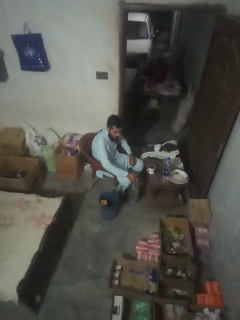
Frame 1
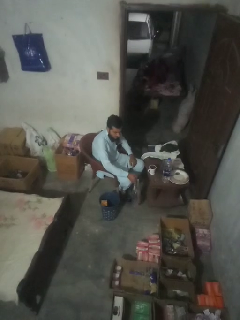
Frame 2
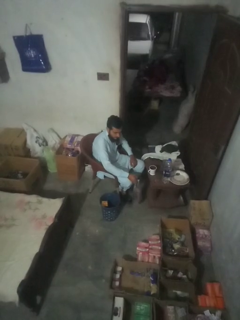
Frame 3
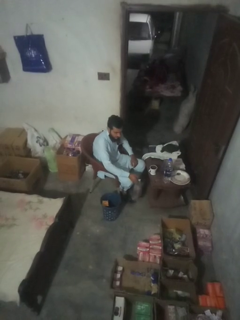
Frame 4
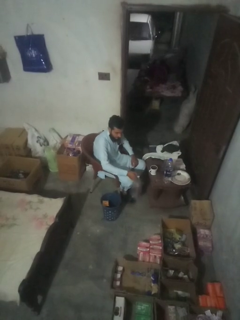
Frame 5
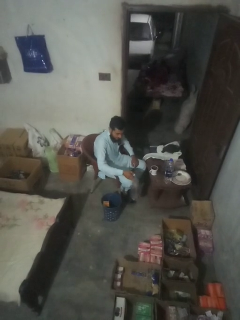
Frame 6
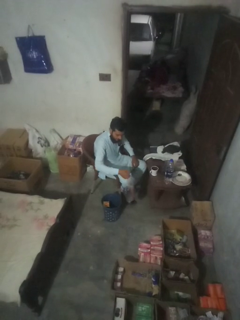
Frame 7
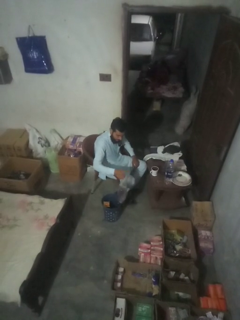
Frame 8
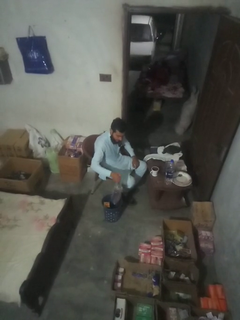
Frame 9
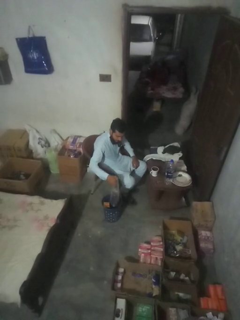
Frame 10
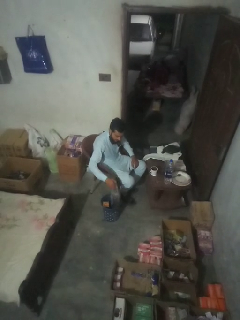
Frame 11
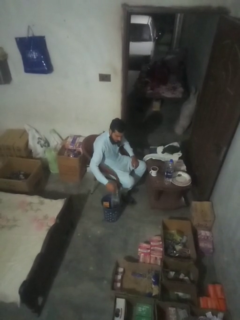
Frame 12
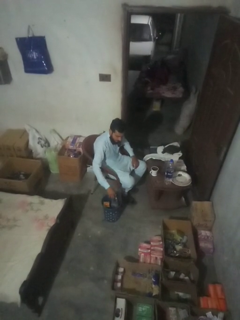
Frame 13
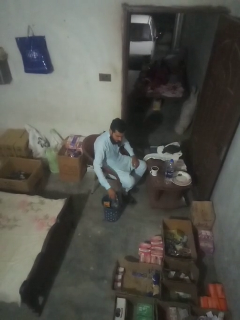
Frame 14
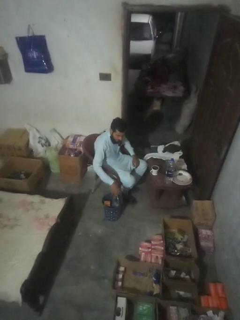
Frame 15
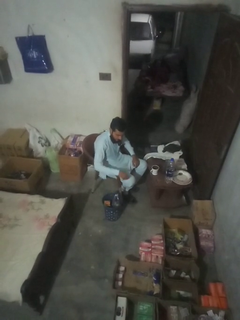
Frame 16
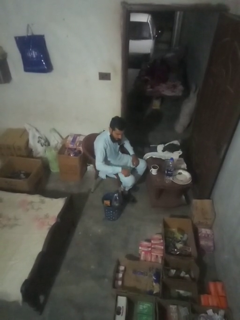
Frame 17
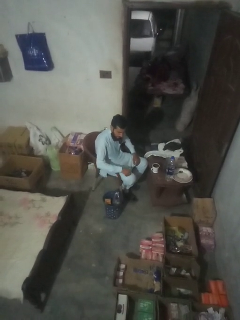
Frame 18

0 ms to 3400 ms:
person removes trashbag from trashcan

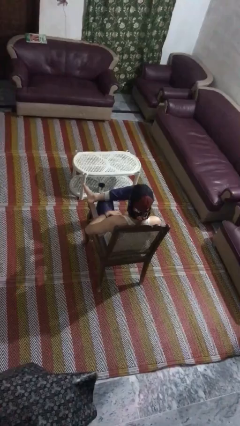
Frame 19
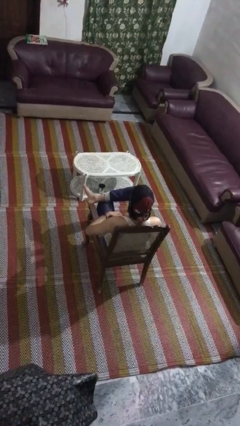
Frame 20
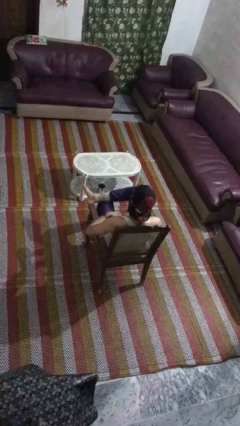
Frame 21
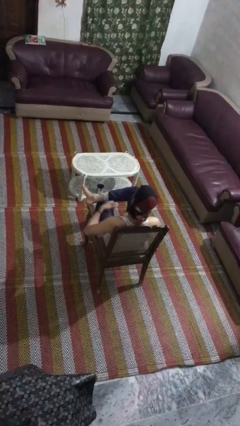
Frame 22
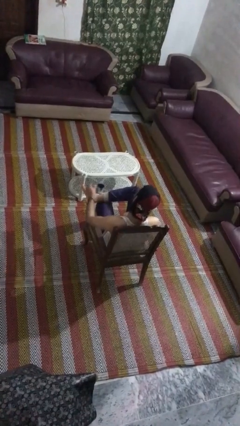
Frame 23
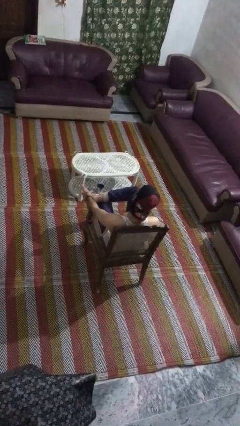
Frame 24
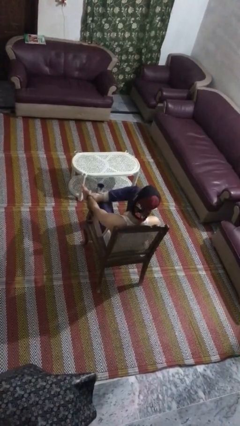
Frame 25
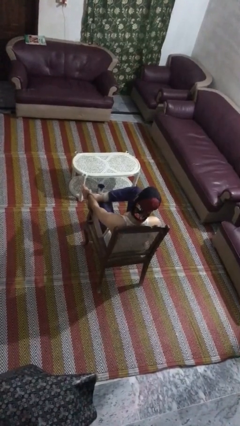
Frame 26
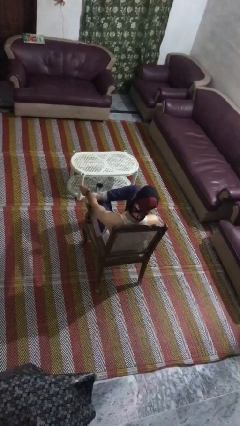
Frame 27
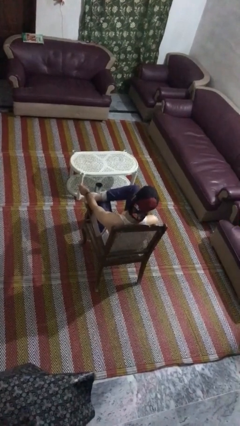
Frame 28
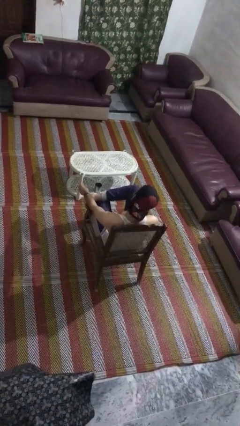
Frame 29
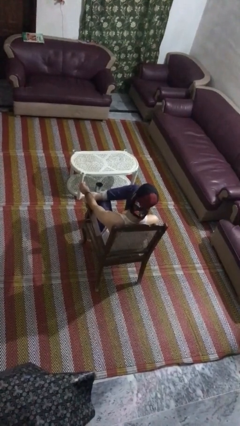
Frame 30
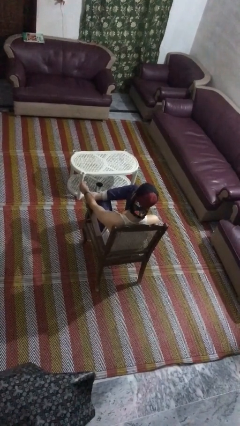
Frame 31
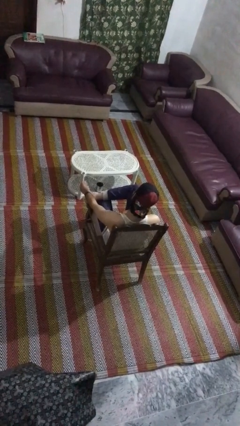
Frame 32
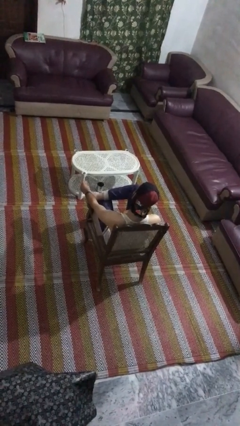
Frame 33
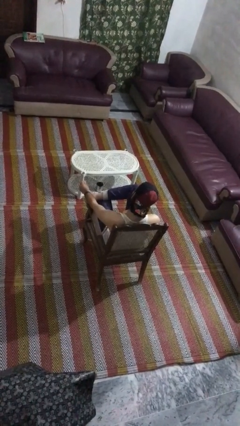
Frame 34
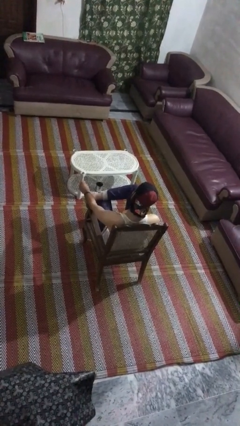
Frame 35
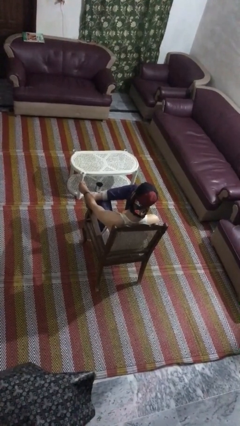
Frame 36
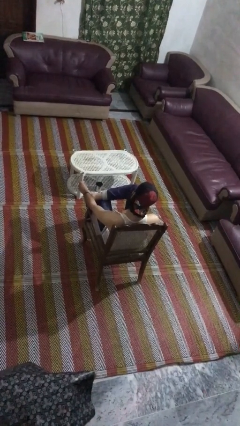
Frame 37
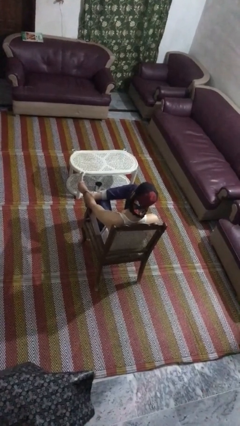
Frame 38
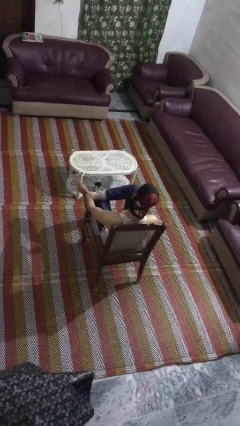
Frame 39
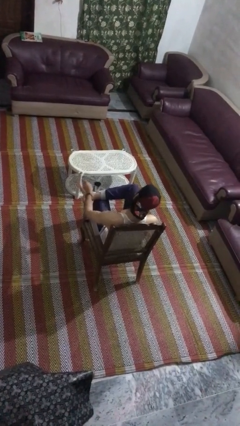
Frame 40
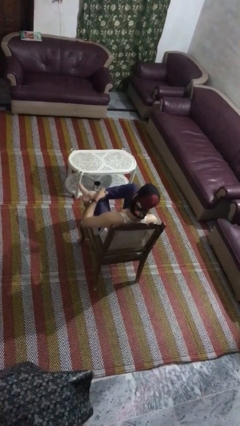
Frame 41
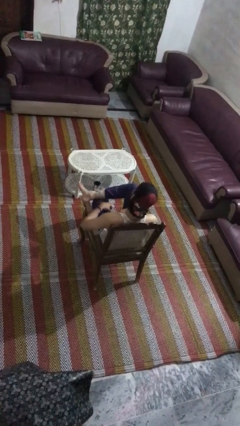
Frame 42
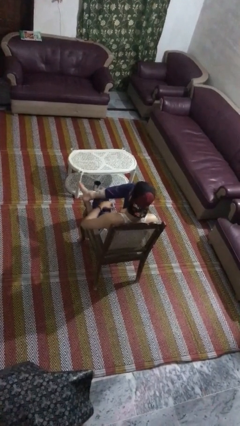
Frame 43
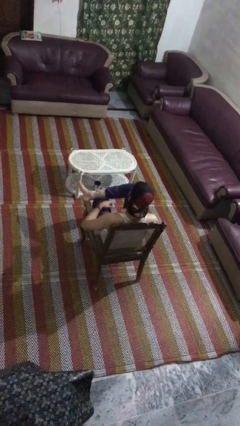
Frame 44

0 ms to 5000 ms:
person rubs foot

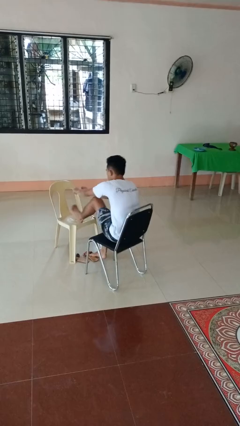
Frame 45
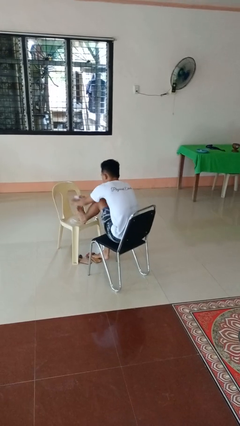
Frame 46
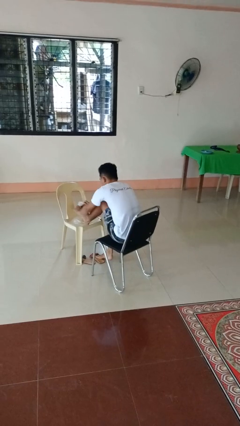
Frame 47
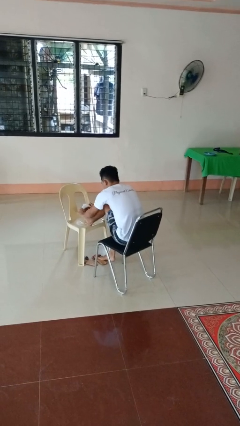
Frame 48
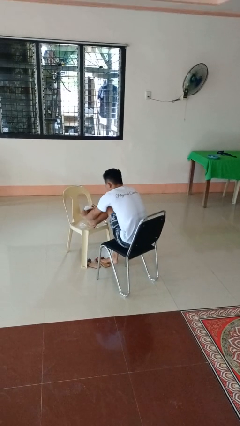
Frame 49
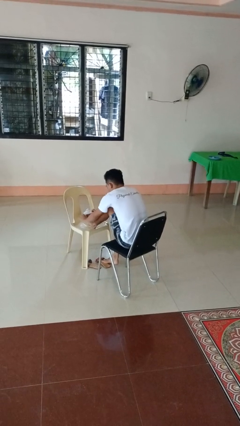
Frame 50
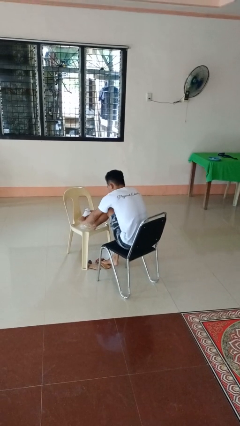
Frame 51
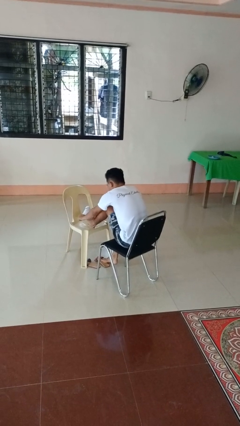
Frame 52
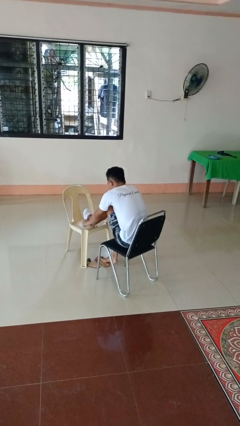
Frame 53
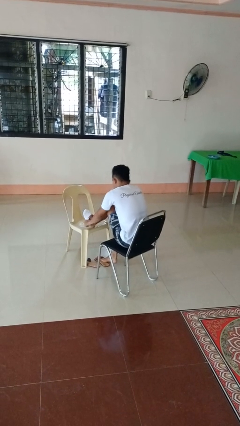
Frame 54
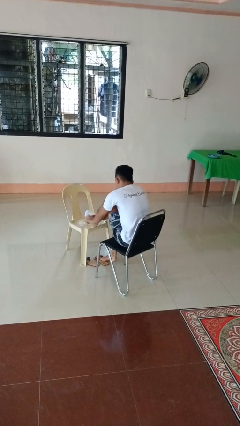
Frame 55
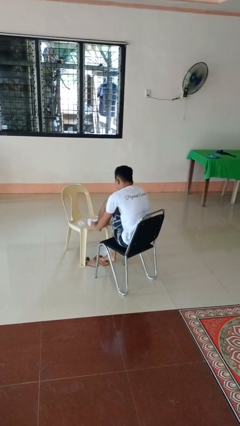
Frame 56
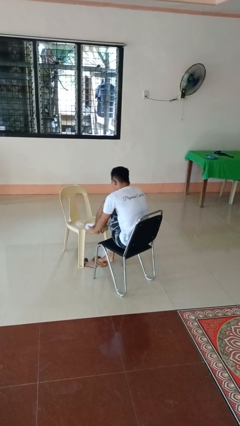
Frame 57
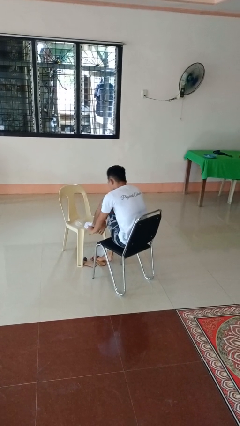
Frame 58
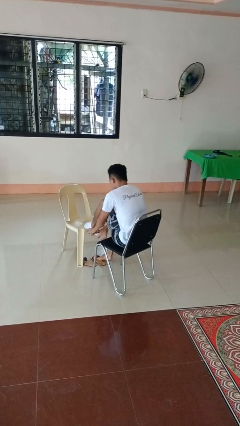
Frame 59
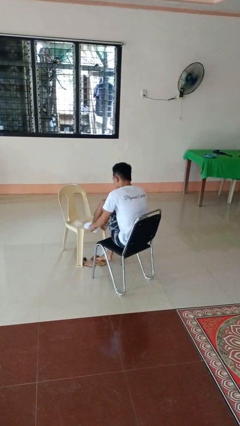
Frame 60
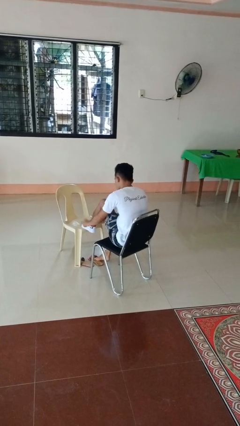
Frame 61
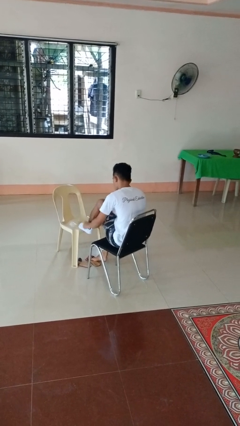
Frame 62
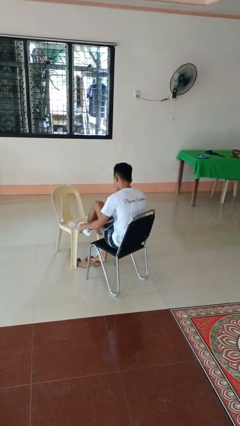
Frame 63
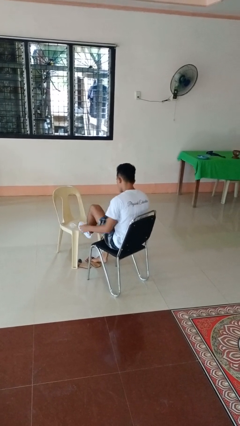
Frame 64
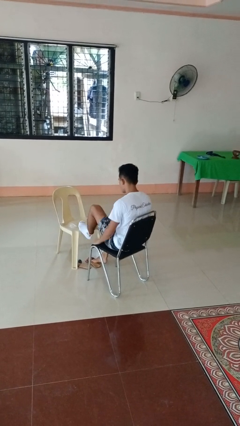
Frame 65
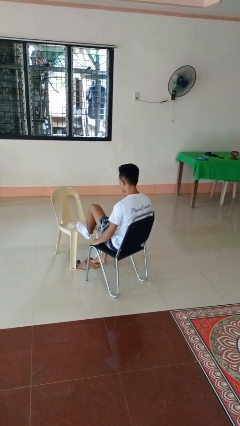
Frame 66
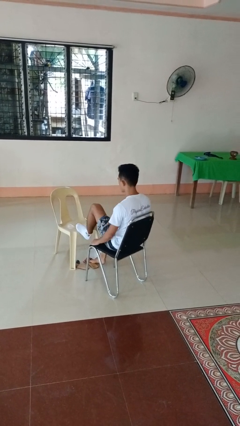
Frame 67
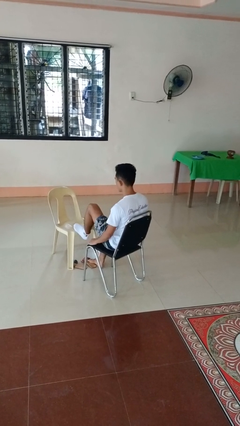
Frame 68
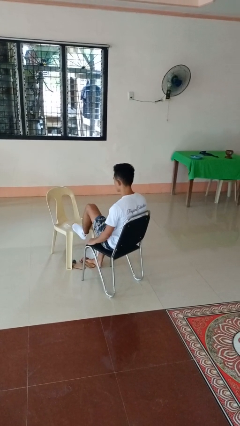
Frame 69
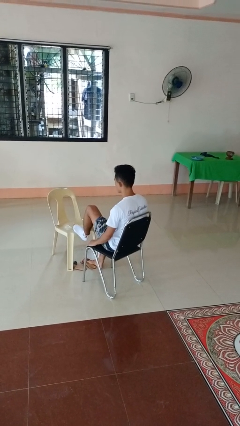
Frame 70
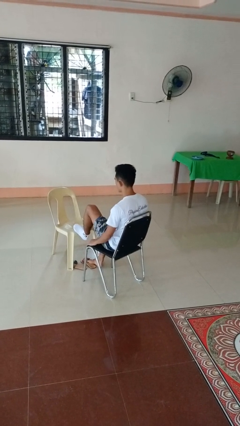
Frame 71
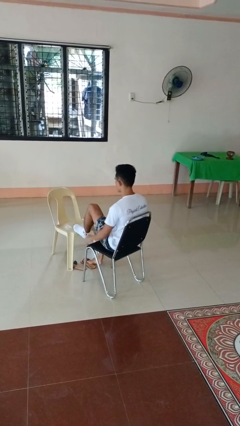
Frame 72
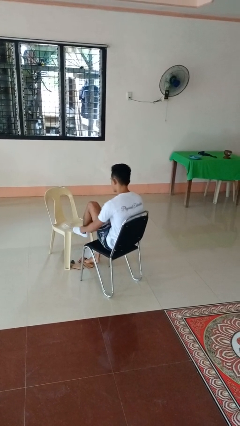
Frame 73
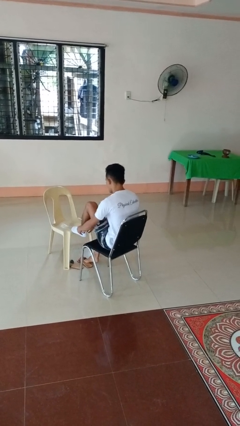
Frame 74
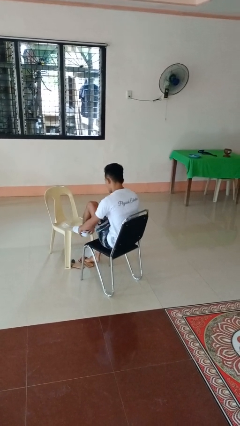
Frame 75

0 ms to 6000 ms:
person puts on socks

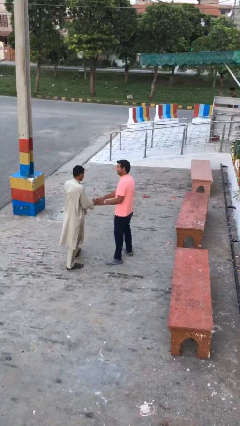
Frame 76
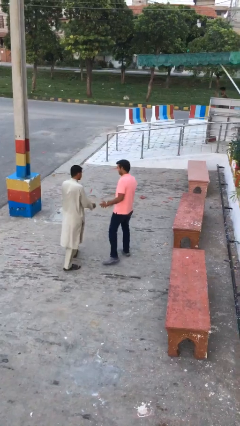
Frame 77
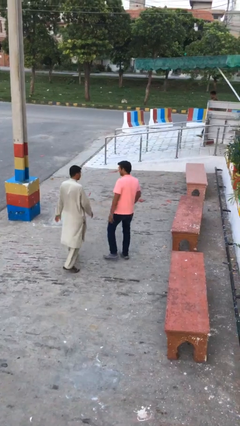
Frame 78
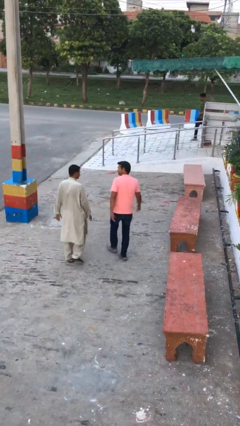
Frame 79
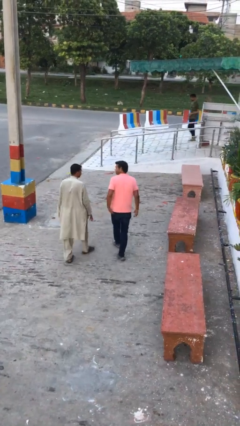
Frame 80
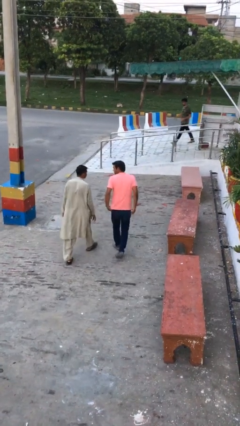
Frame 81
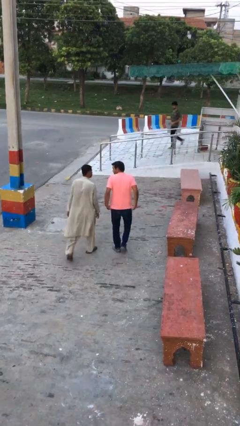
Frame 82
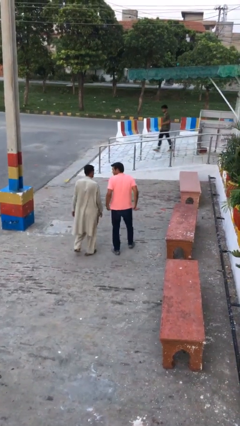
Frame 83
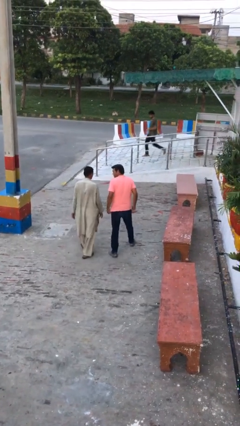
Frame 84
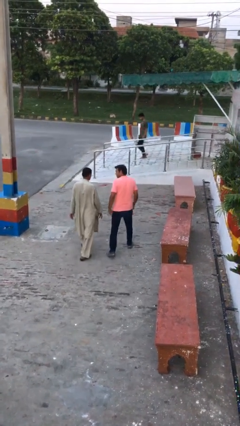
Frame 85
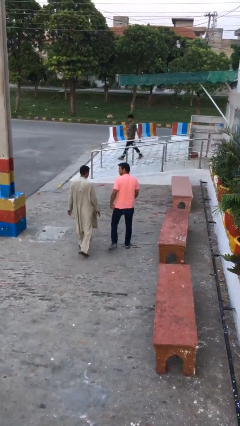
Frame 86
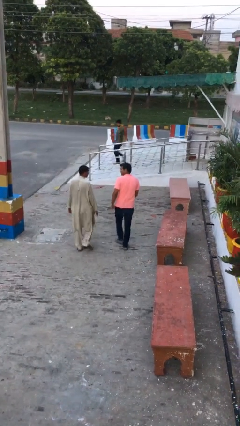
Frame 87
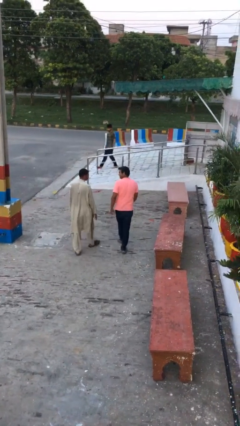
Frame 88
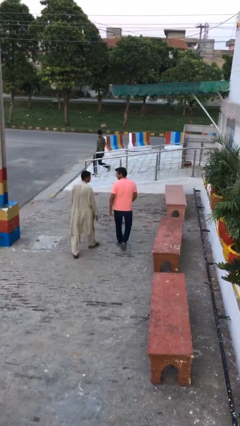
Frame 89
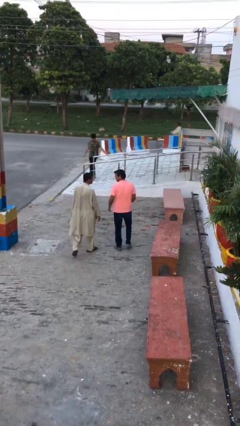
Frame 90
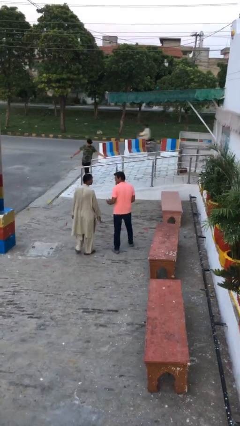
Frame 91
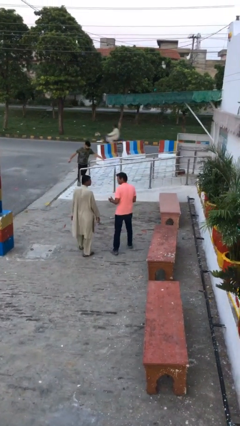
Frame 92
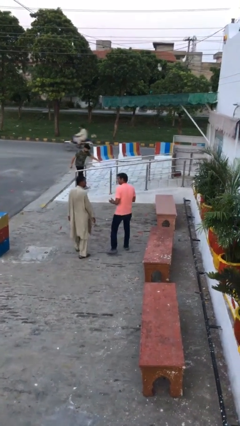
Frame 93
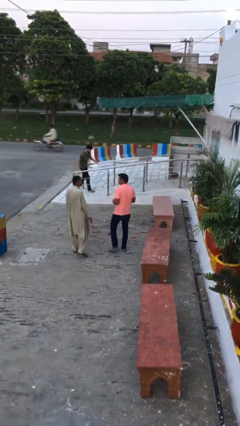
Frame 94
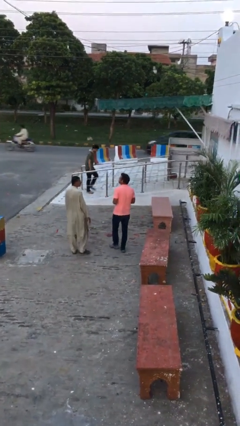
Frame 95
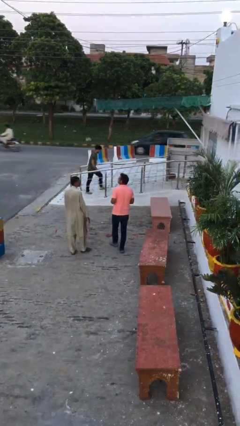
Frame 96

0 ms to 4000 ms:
person talks to person
